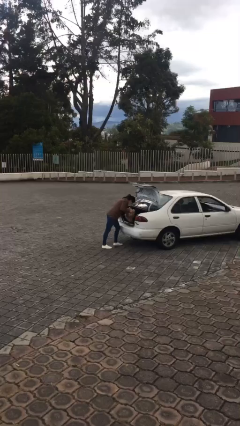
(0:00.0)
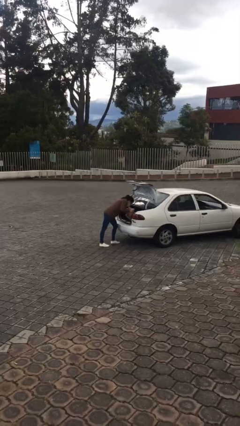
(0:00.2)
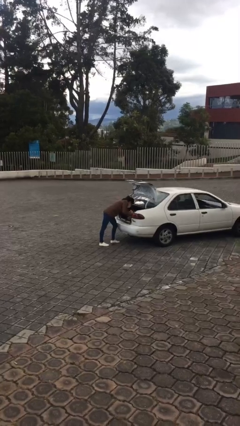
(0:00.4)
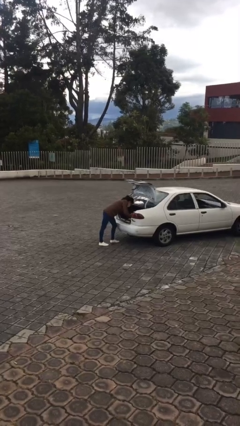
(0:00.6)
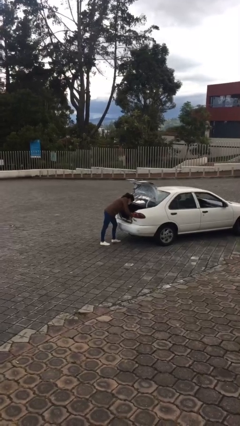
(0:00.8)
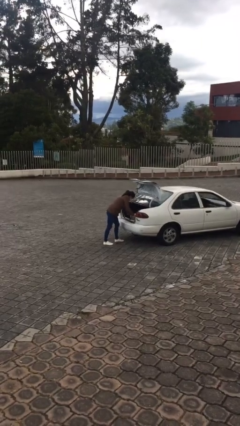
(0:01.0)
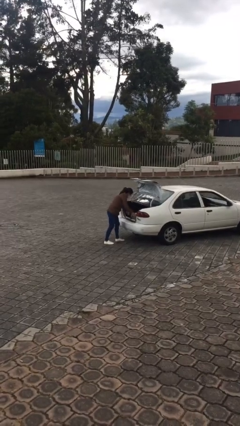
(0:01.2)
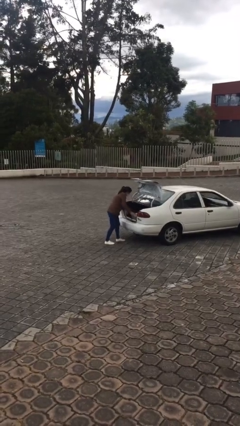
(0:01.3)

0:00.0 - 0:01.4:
person loads car

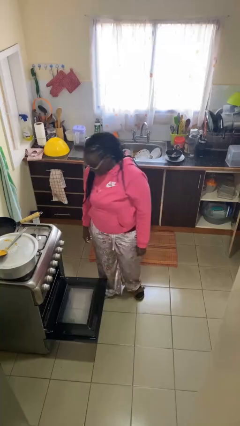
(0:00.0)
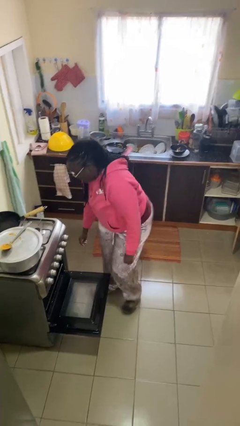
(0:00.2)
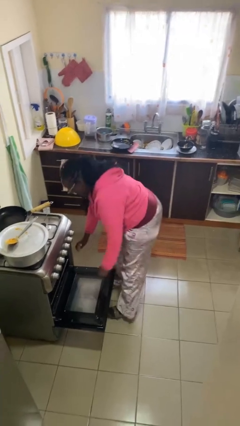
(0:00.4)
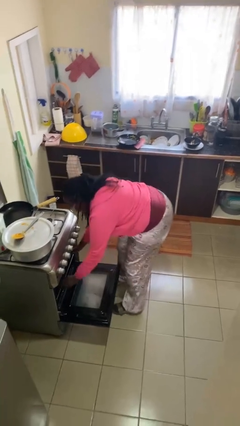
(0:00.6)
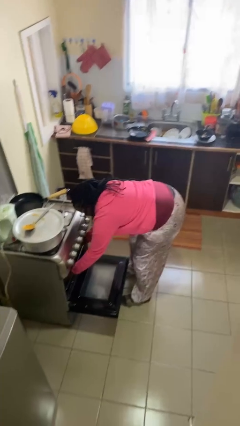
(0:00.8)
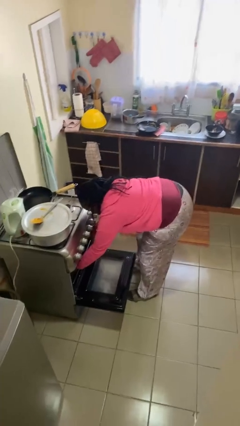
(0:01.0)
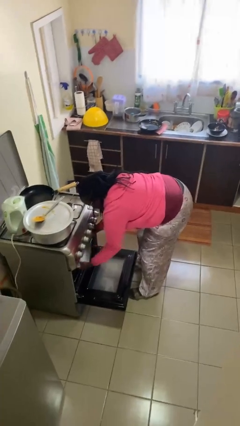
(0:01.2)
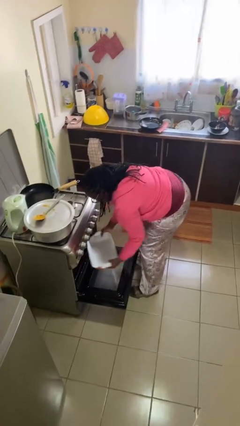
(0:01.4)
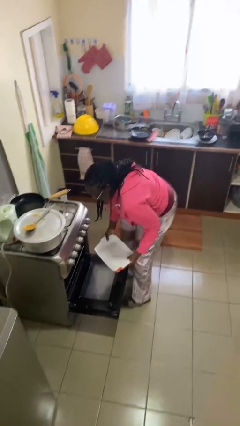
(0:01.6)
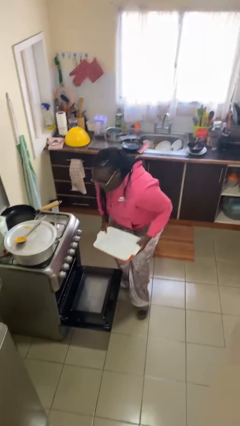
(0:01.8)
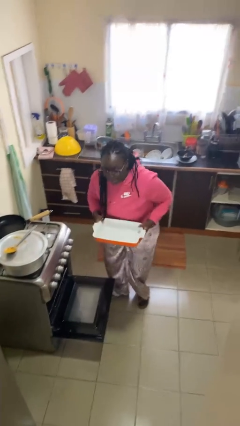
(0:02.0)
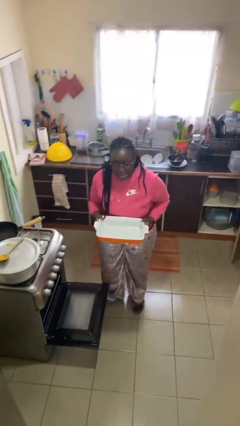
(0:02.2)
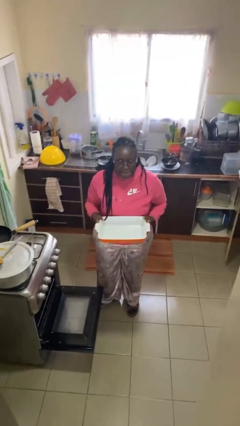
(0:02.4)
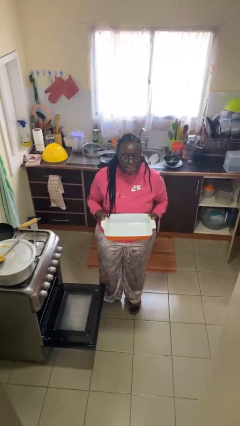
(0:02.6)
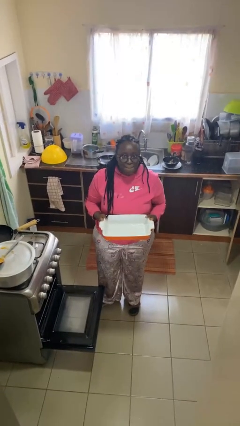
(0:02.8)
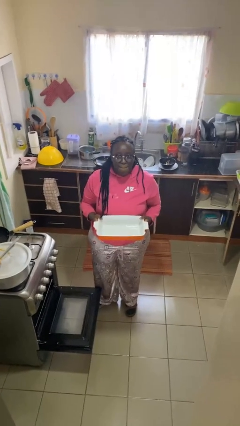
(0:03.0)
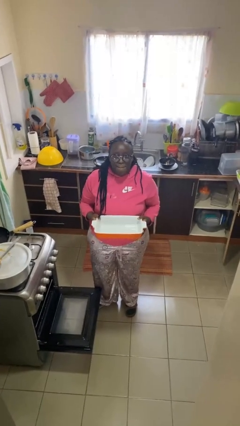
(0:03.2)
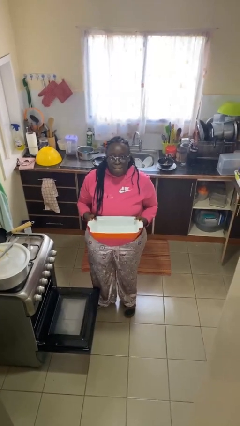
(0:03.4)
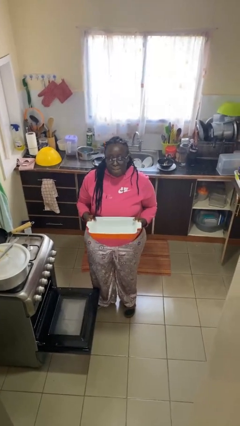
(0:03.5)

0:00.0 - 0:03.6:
person takes object from oven

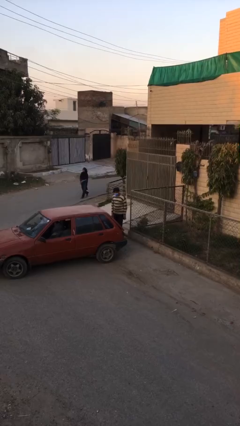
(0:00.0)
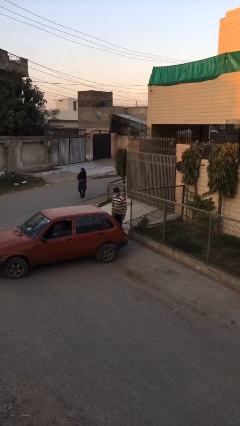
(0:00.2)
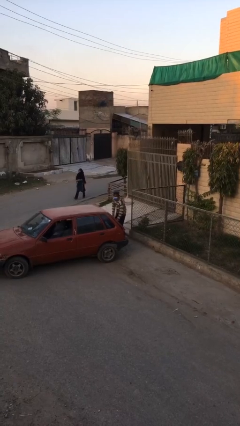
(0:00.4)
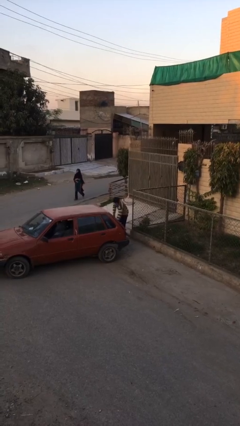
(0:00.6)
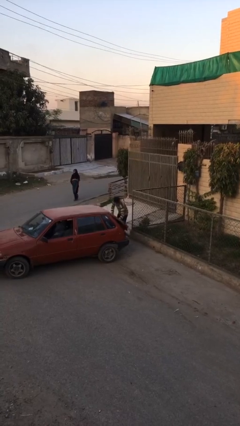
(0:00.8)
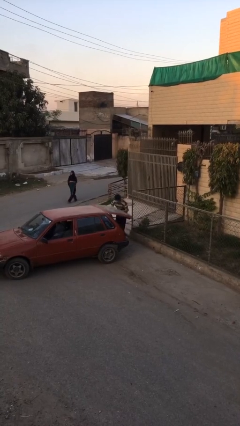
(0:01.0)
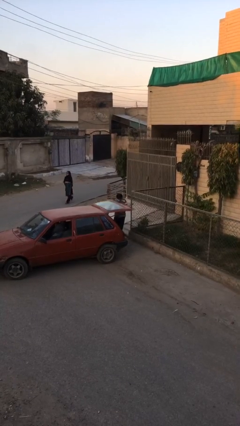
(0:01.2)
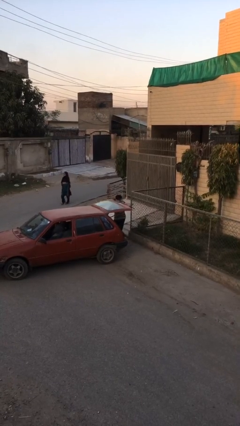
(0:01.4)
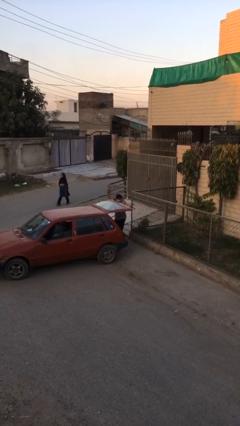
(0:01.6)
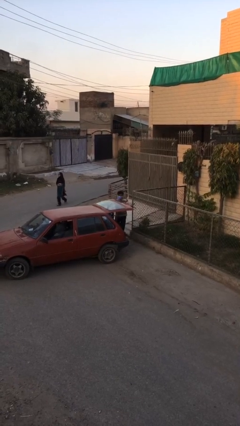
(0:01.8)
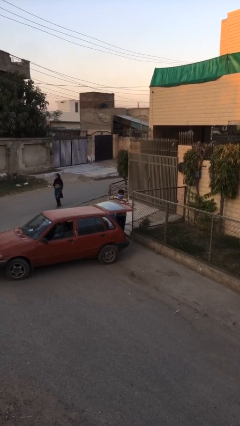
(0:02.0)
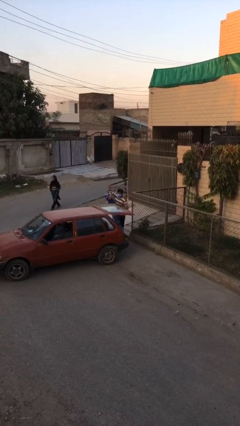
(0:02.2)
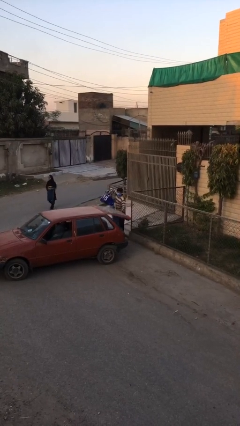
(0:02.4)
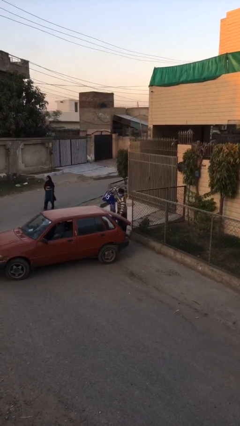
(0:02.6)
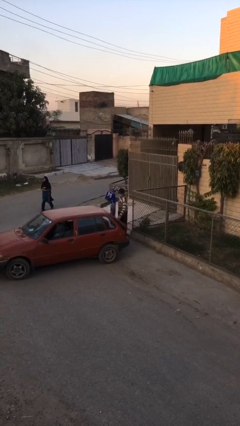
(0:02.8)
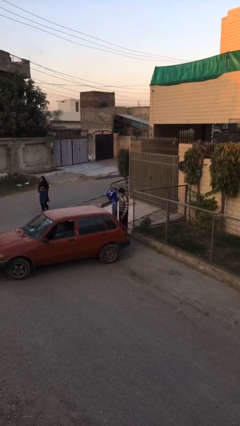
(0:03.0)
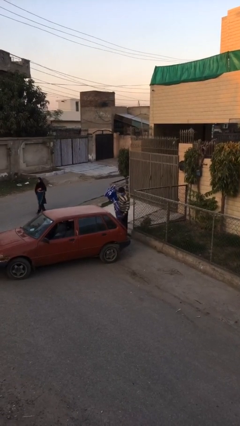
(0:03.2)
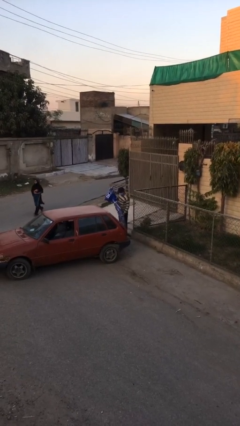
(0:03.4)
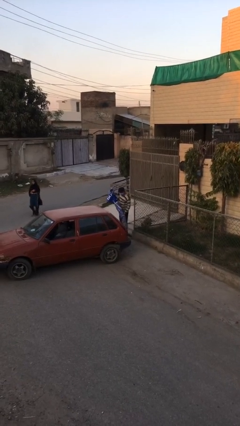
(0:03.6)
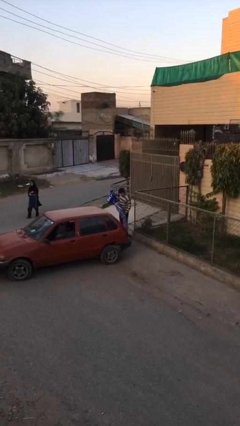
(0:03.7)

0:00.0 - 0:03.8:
person unloads car

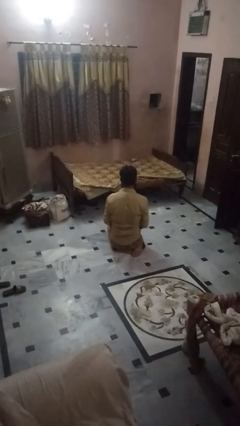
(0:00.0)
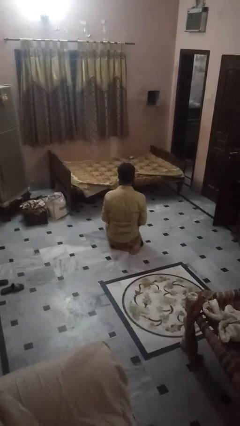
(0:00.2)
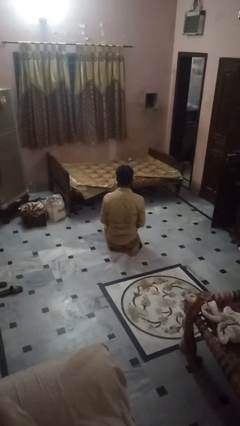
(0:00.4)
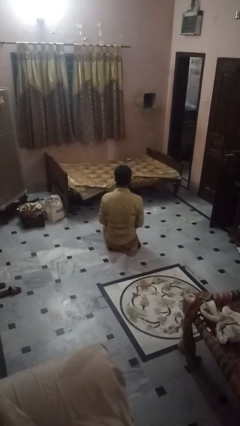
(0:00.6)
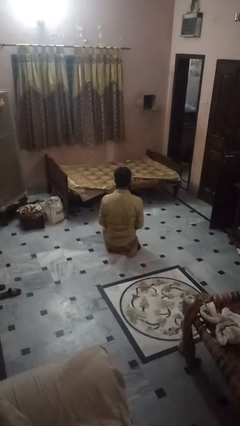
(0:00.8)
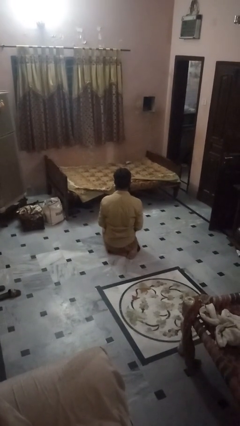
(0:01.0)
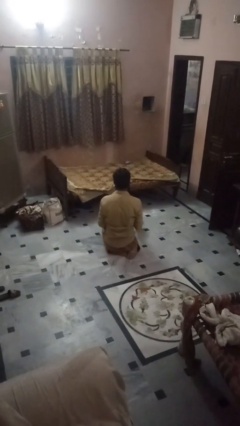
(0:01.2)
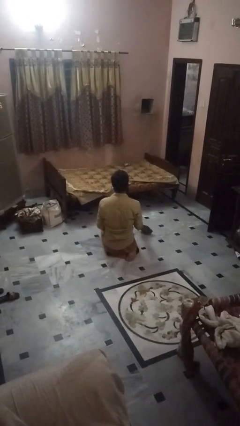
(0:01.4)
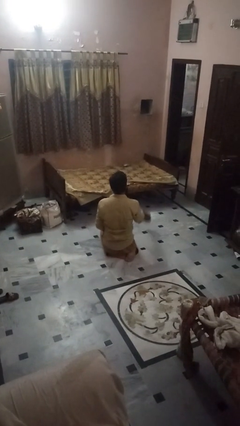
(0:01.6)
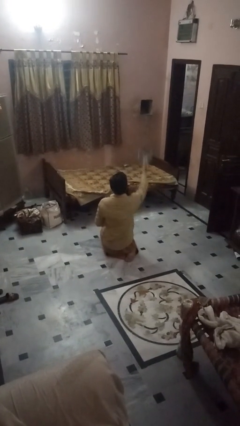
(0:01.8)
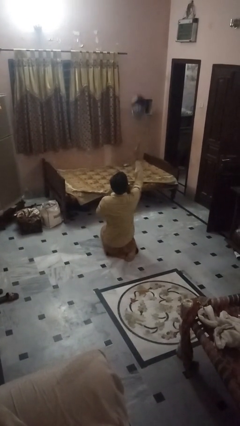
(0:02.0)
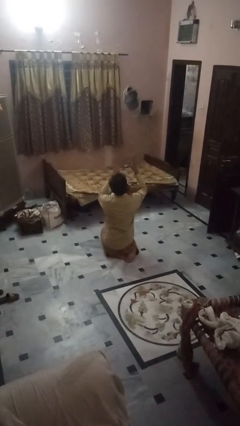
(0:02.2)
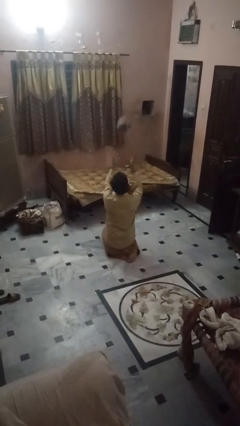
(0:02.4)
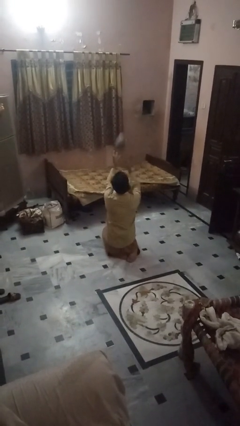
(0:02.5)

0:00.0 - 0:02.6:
person drops object

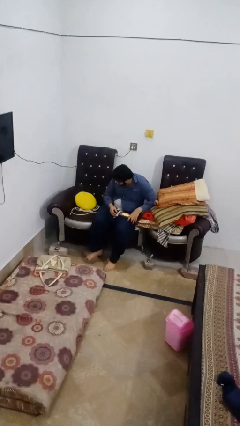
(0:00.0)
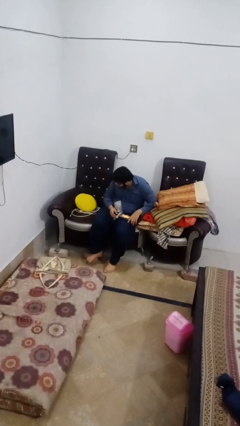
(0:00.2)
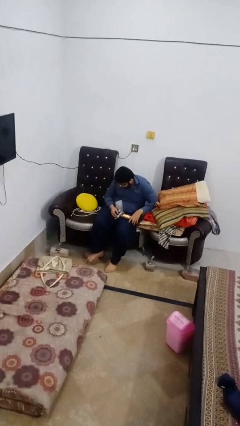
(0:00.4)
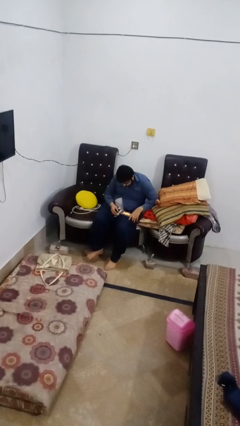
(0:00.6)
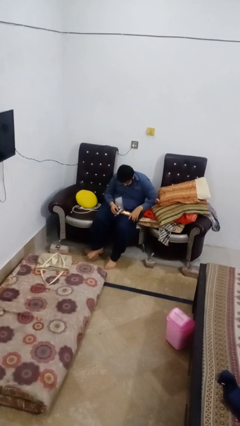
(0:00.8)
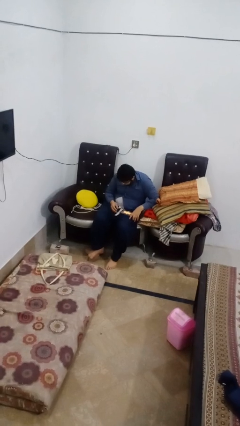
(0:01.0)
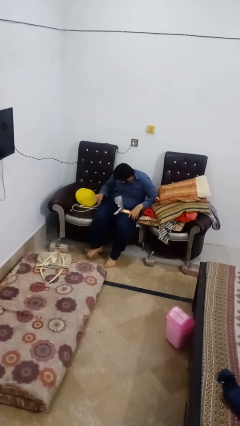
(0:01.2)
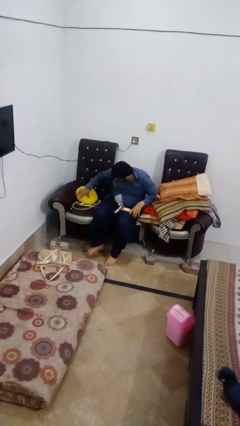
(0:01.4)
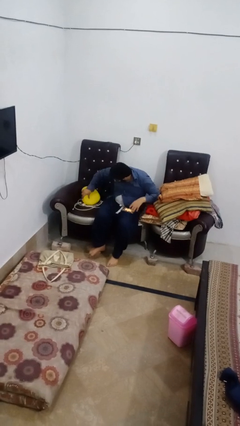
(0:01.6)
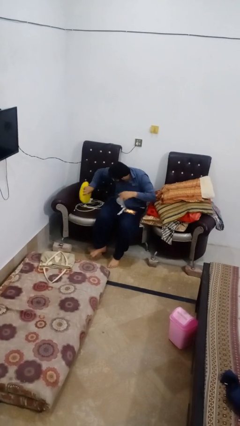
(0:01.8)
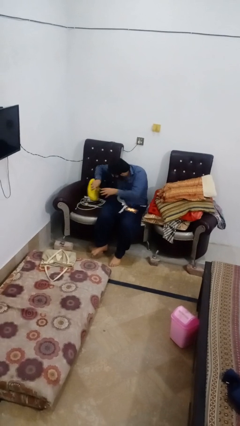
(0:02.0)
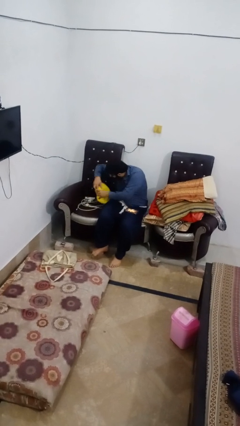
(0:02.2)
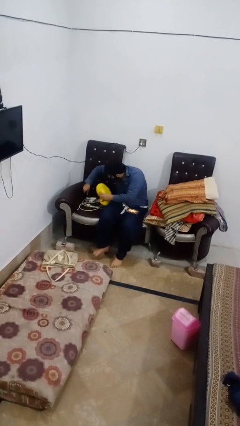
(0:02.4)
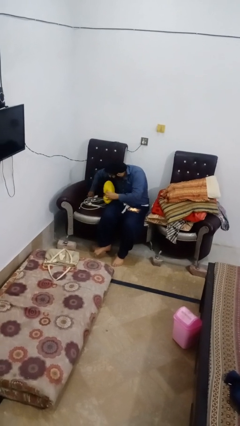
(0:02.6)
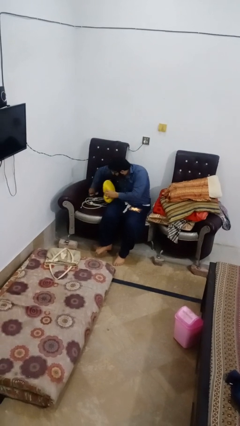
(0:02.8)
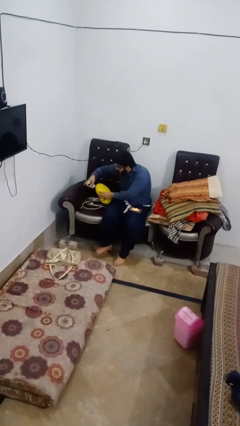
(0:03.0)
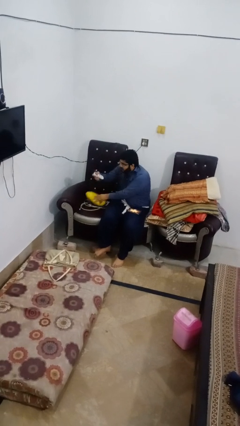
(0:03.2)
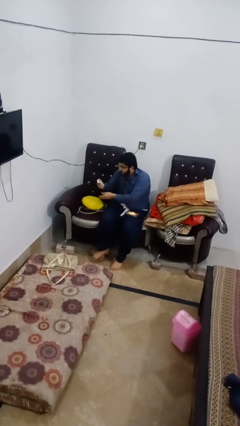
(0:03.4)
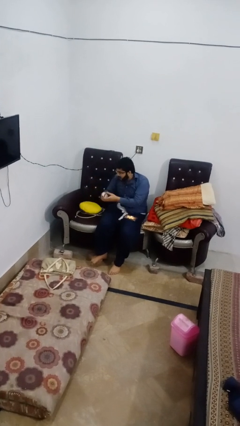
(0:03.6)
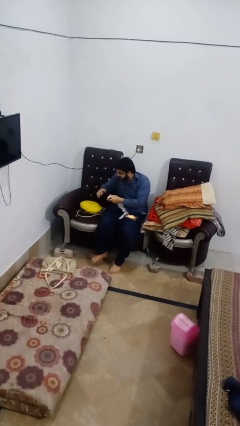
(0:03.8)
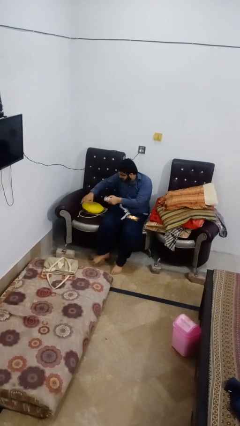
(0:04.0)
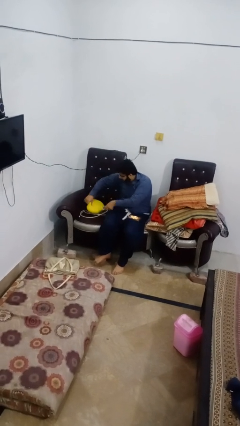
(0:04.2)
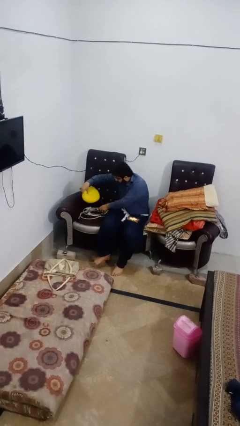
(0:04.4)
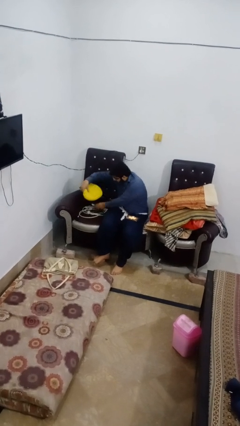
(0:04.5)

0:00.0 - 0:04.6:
person searches in couch

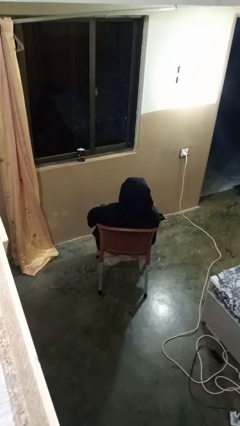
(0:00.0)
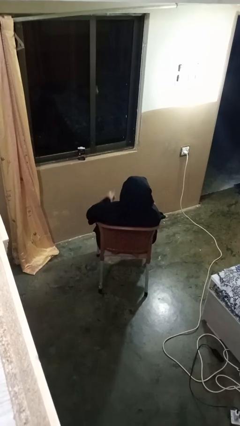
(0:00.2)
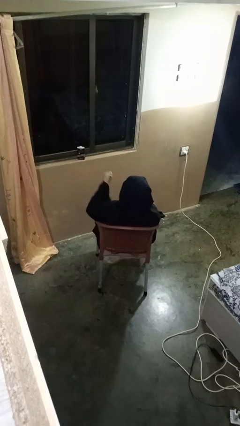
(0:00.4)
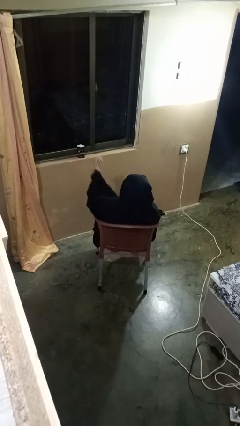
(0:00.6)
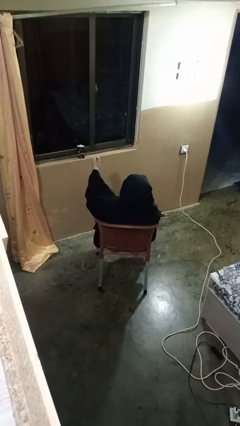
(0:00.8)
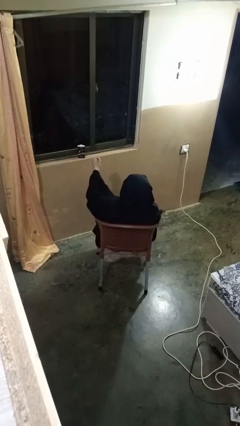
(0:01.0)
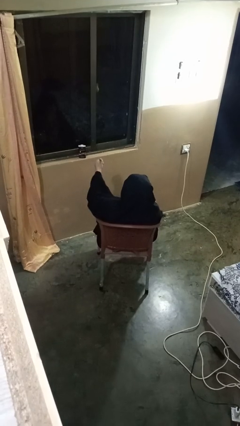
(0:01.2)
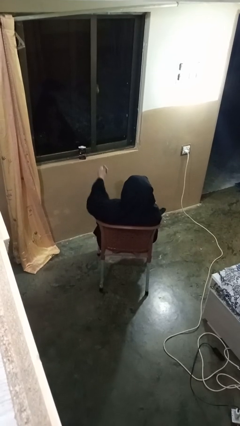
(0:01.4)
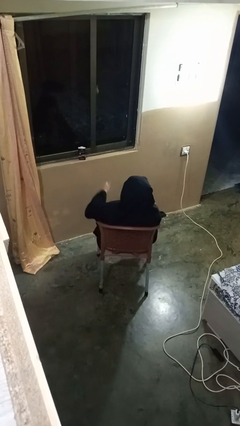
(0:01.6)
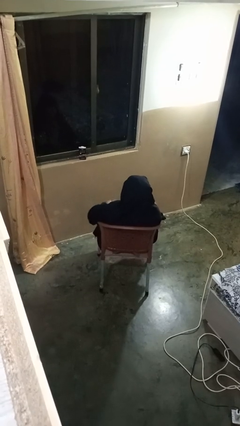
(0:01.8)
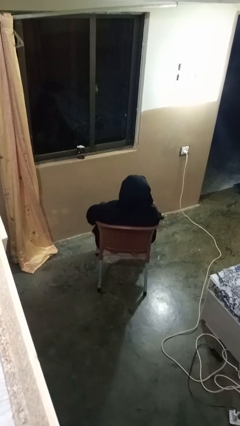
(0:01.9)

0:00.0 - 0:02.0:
person gestures thumbs up
